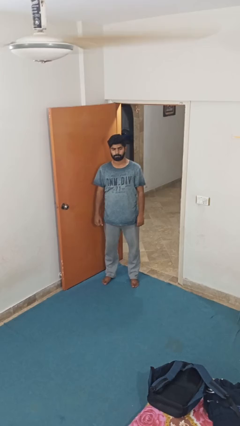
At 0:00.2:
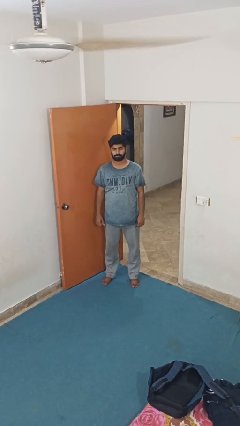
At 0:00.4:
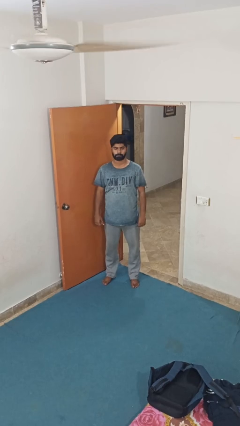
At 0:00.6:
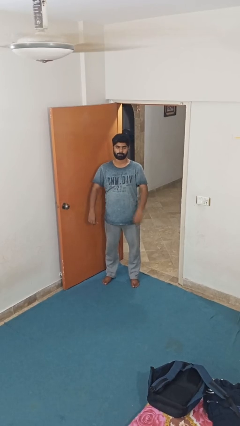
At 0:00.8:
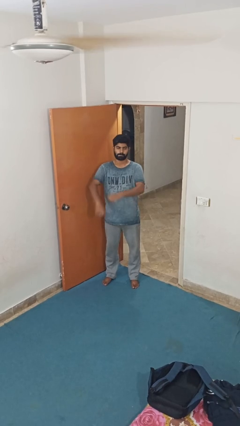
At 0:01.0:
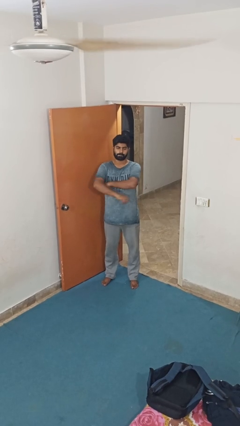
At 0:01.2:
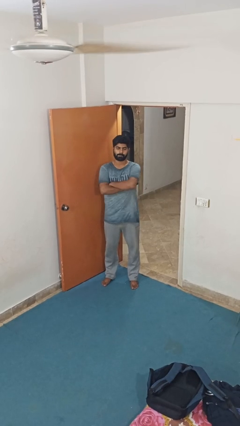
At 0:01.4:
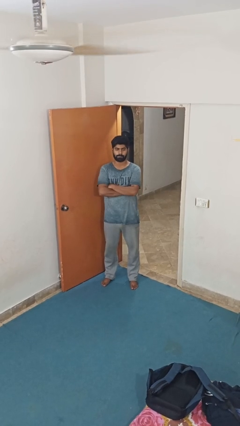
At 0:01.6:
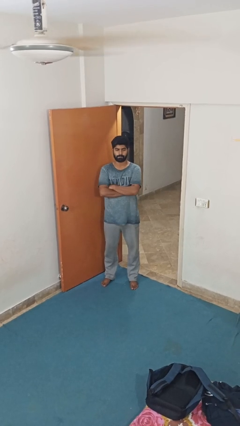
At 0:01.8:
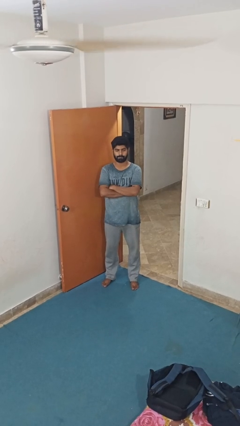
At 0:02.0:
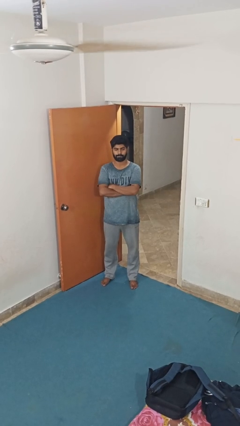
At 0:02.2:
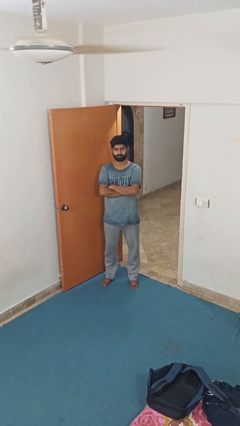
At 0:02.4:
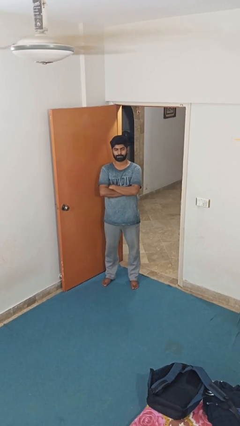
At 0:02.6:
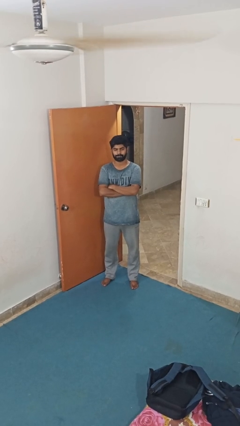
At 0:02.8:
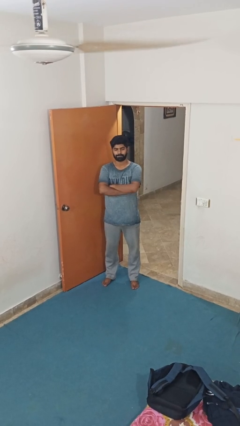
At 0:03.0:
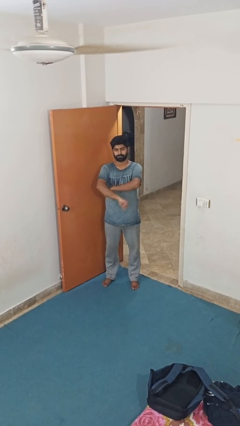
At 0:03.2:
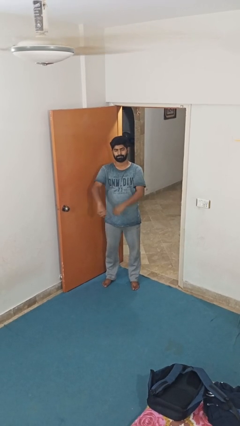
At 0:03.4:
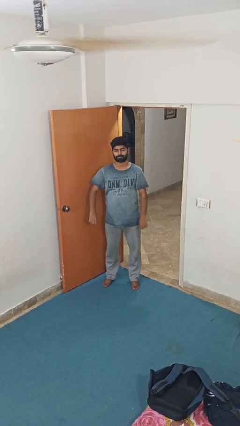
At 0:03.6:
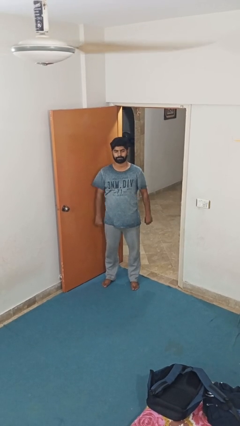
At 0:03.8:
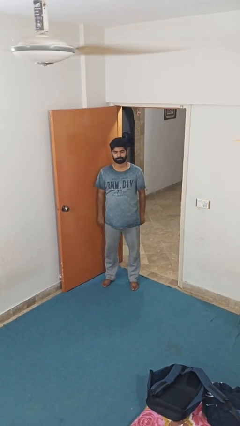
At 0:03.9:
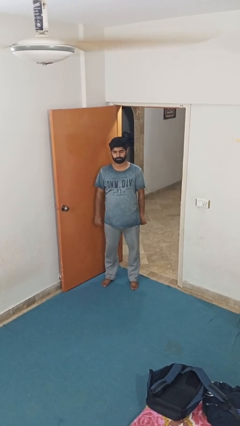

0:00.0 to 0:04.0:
person crosses arms

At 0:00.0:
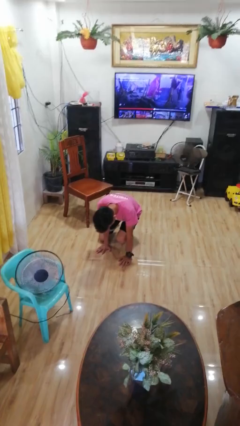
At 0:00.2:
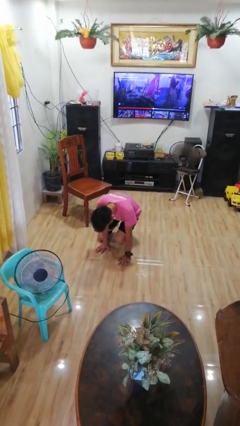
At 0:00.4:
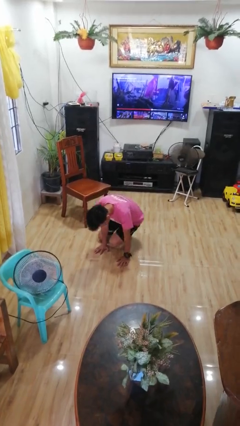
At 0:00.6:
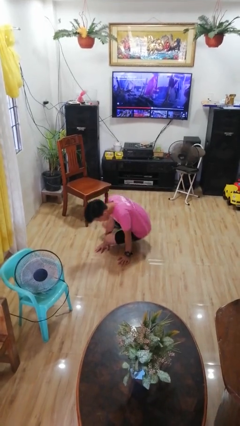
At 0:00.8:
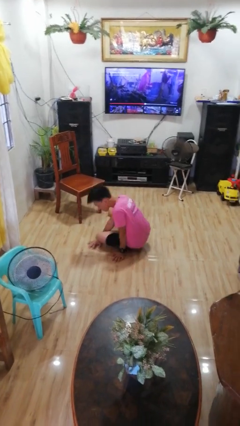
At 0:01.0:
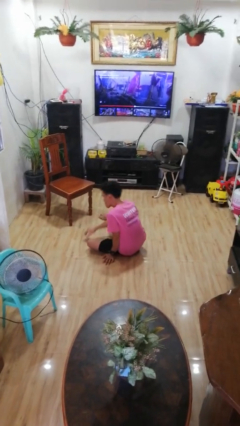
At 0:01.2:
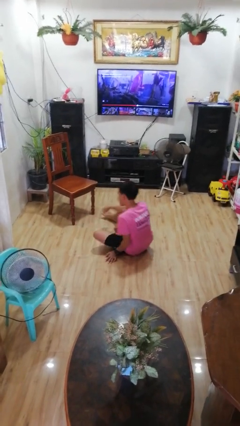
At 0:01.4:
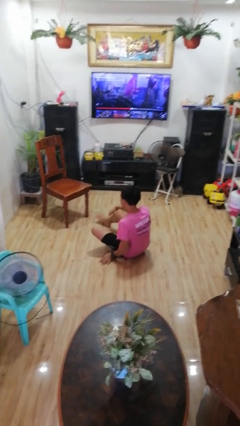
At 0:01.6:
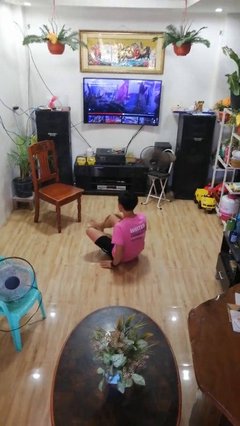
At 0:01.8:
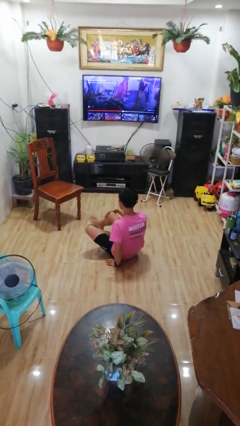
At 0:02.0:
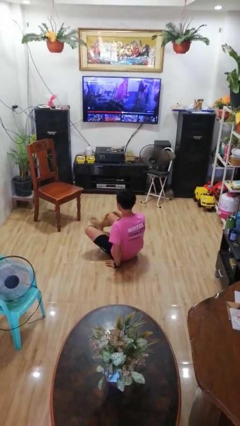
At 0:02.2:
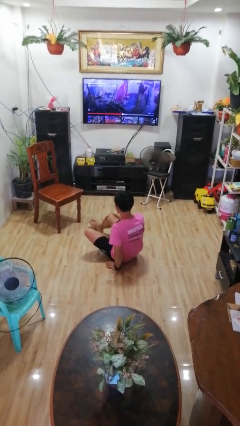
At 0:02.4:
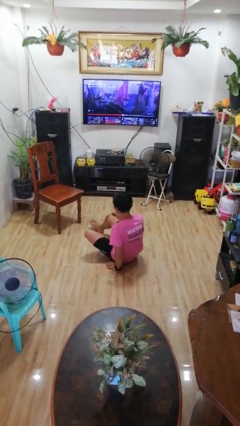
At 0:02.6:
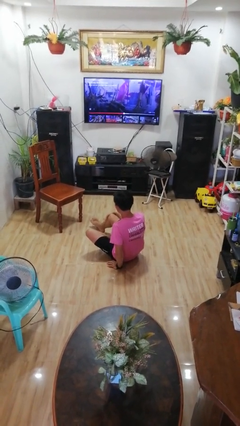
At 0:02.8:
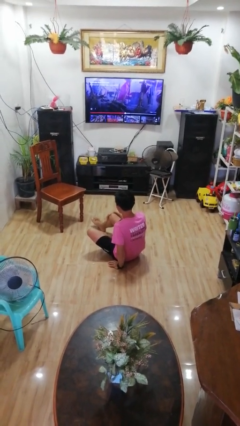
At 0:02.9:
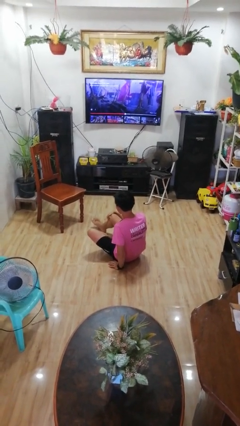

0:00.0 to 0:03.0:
person lies down on floor

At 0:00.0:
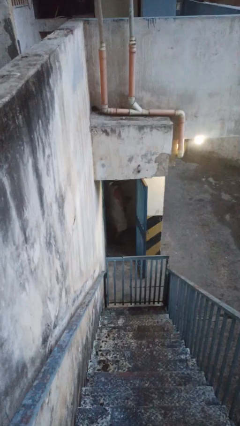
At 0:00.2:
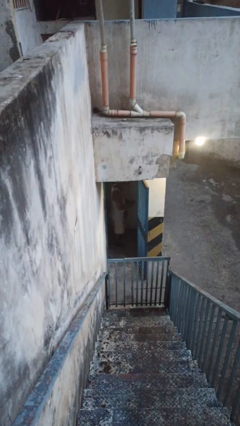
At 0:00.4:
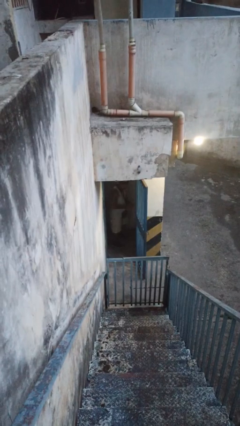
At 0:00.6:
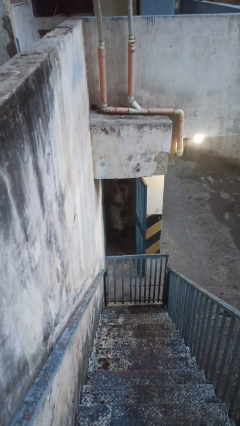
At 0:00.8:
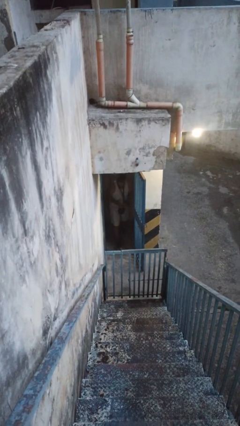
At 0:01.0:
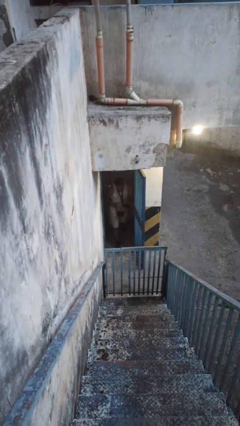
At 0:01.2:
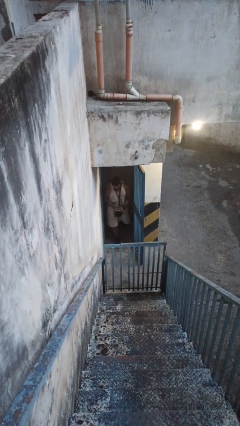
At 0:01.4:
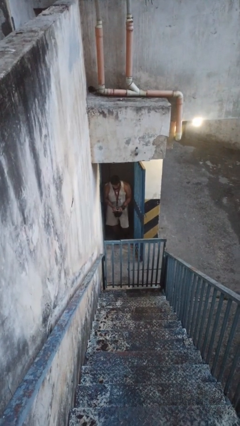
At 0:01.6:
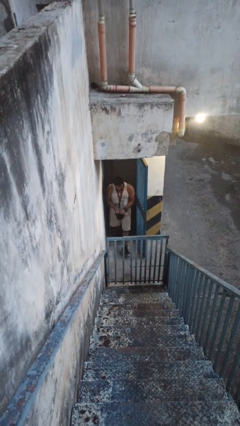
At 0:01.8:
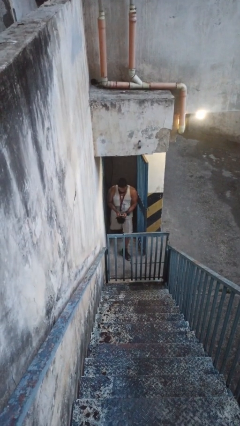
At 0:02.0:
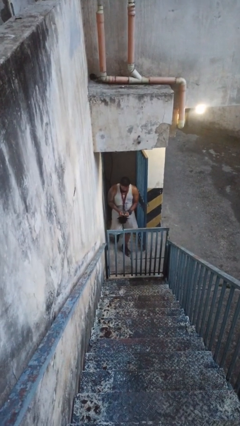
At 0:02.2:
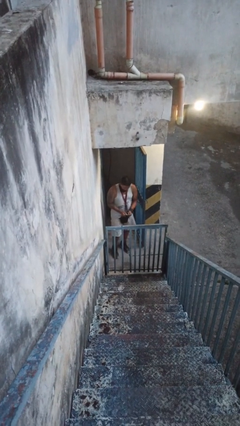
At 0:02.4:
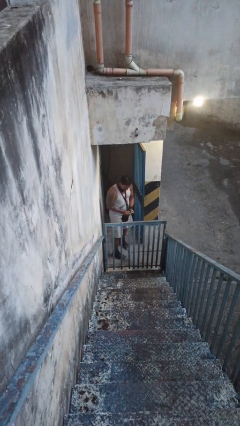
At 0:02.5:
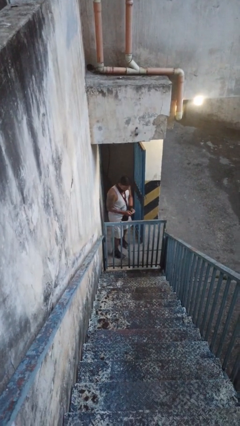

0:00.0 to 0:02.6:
person enters scene through structure

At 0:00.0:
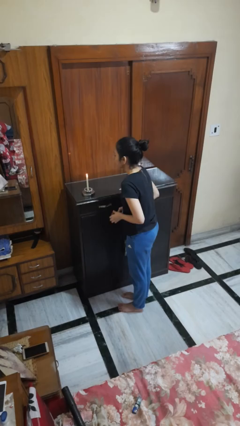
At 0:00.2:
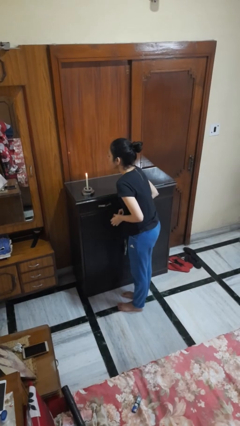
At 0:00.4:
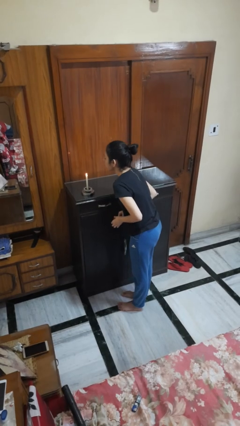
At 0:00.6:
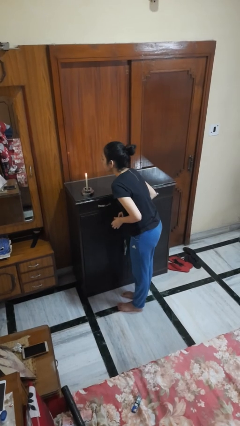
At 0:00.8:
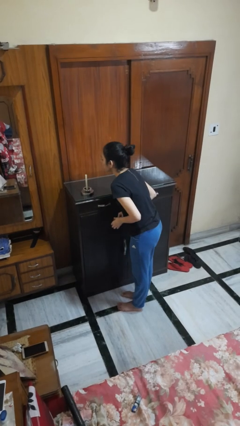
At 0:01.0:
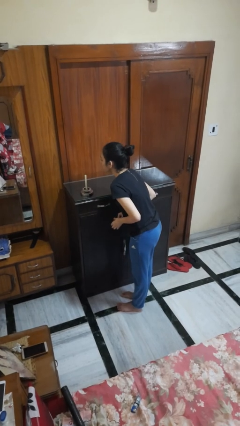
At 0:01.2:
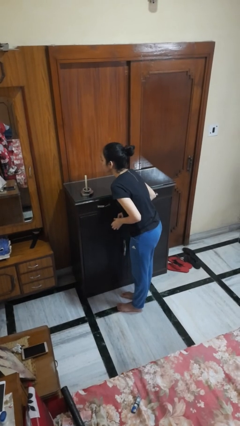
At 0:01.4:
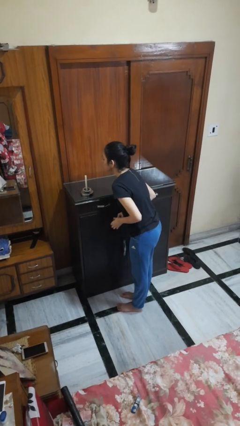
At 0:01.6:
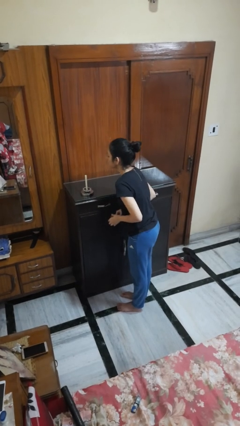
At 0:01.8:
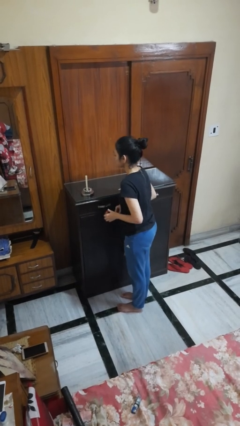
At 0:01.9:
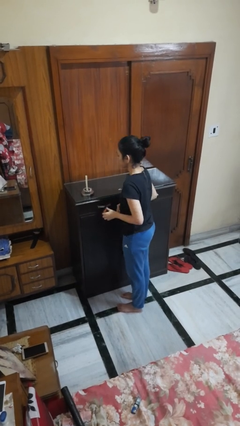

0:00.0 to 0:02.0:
person extinguishes candle

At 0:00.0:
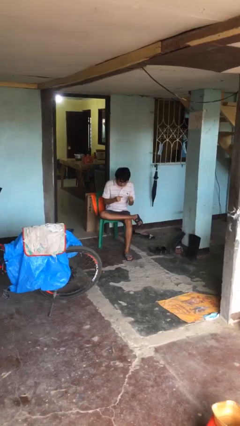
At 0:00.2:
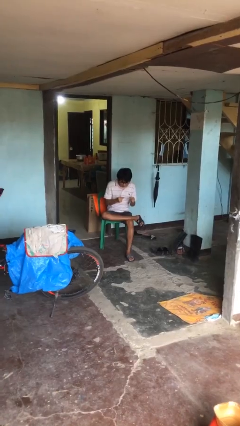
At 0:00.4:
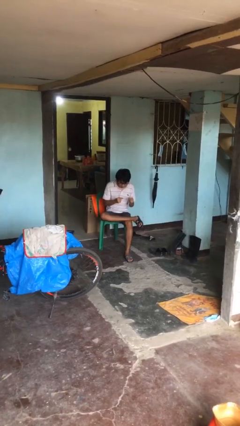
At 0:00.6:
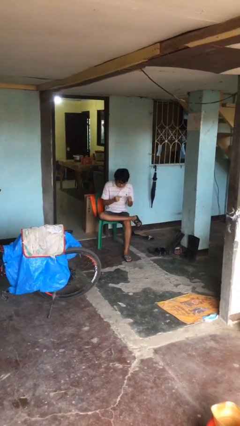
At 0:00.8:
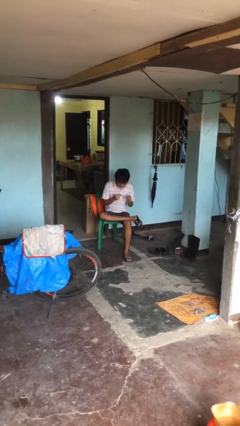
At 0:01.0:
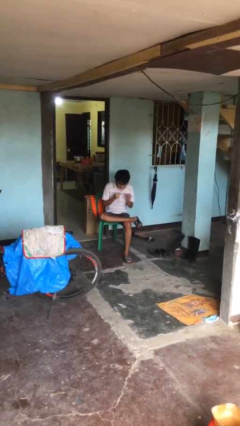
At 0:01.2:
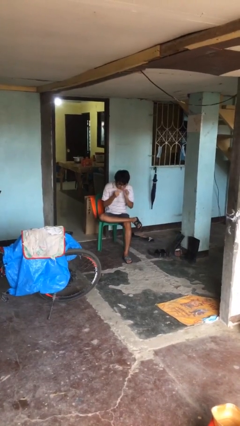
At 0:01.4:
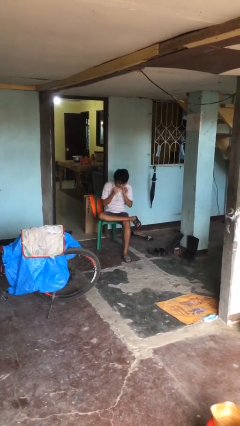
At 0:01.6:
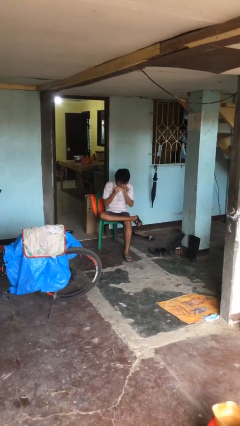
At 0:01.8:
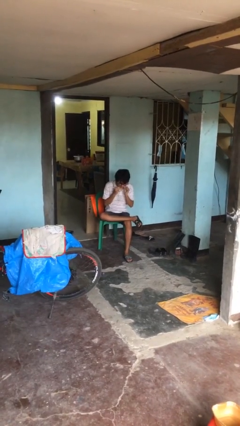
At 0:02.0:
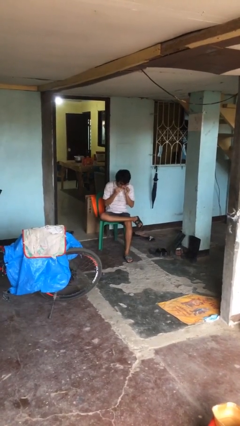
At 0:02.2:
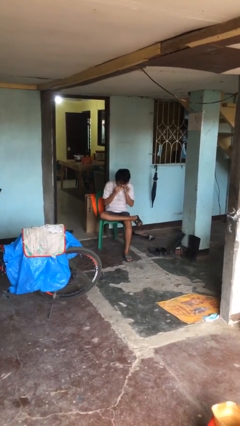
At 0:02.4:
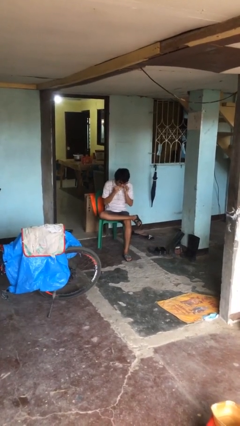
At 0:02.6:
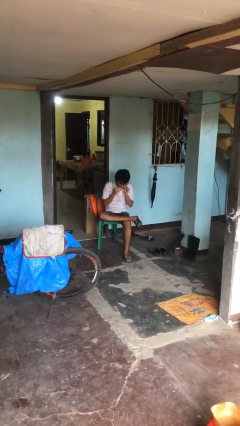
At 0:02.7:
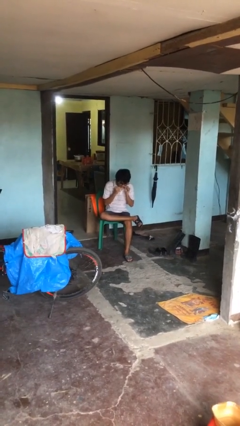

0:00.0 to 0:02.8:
person flosses

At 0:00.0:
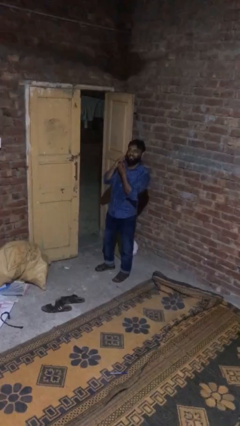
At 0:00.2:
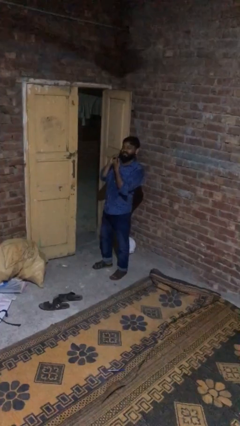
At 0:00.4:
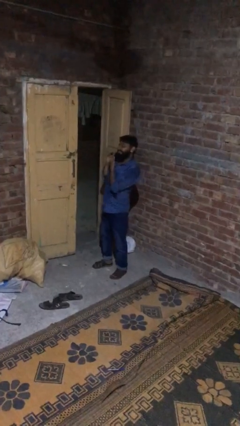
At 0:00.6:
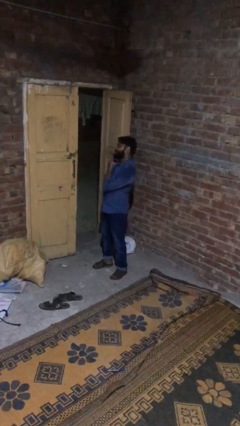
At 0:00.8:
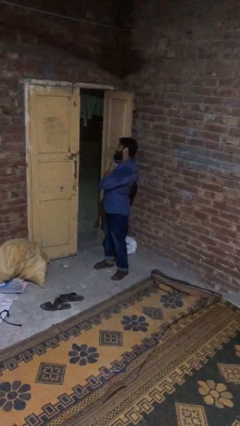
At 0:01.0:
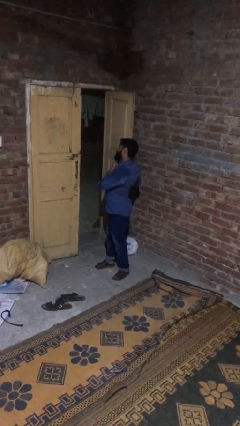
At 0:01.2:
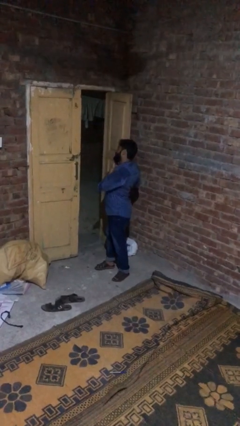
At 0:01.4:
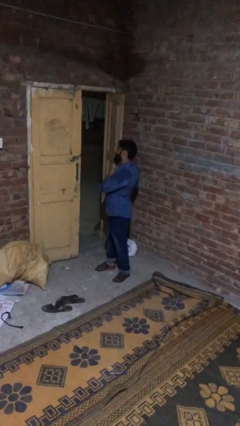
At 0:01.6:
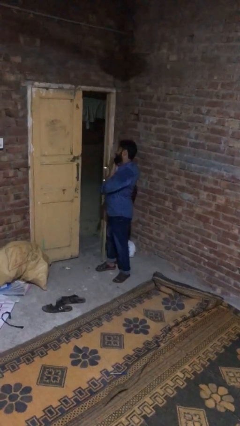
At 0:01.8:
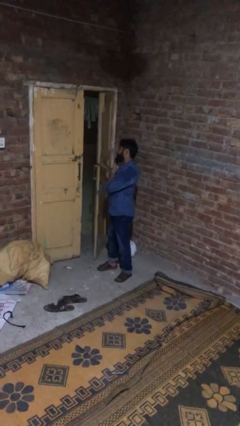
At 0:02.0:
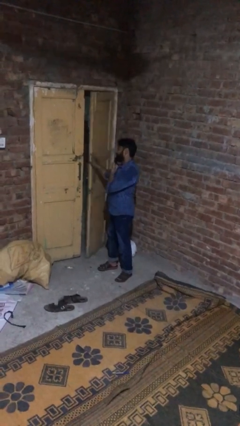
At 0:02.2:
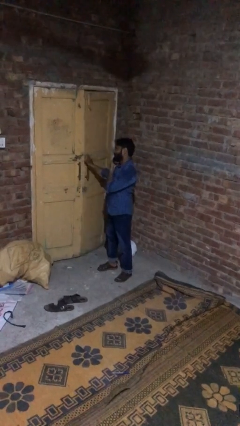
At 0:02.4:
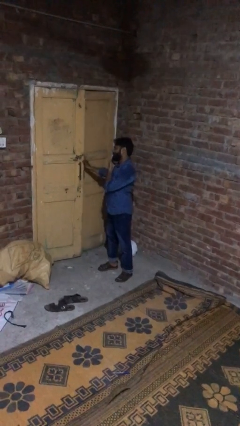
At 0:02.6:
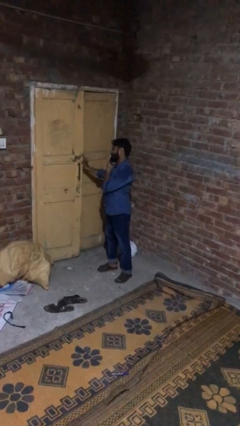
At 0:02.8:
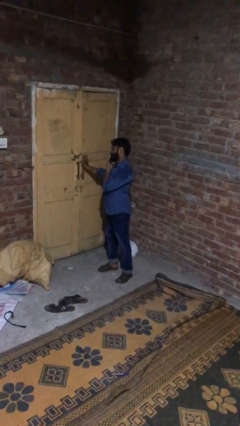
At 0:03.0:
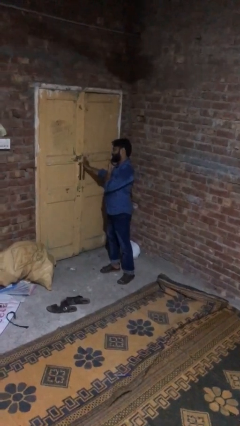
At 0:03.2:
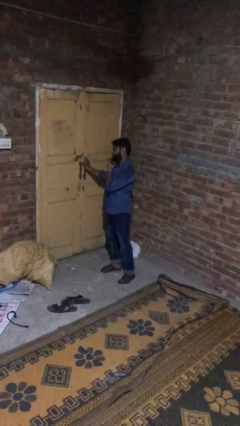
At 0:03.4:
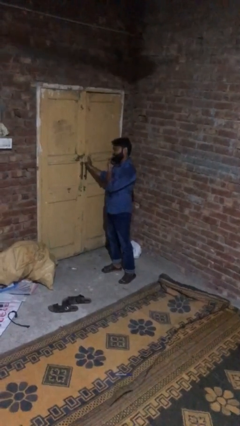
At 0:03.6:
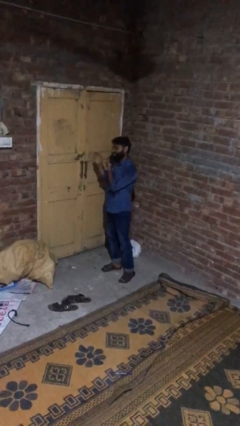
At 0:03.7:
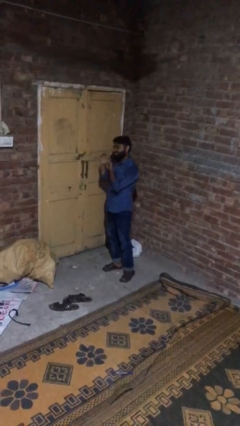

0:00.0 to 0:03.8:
person closes facility door
